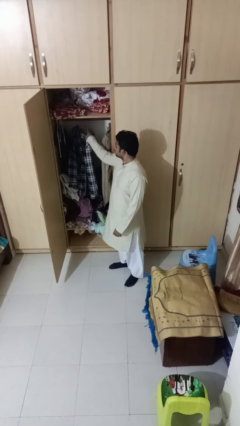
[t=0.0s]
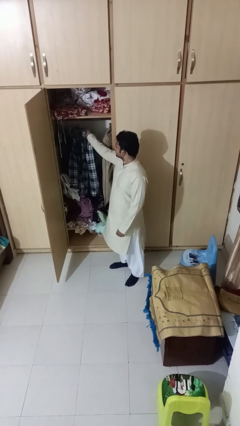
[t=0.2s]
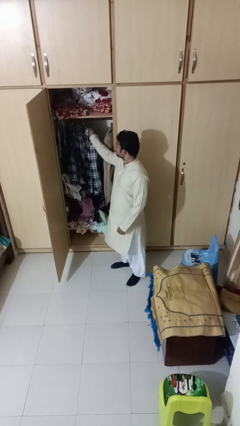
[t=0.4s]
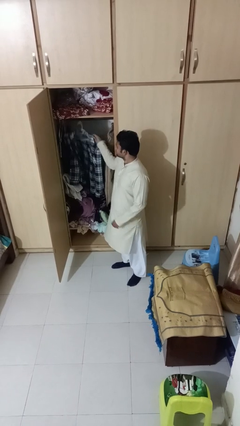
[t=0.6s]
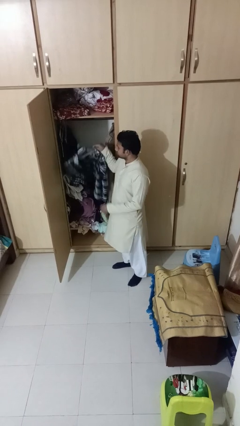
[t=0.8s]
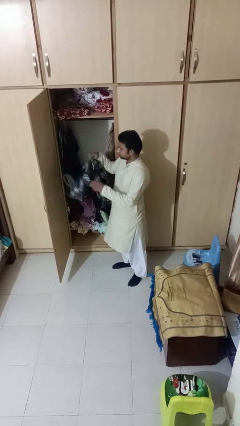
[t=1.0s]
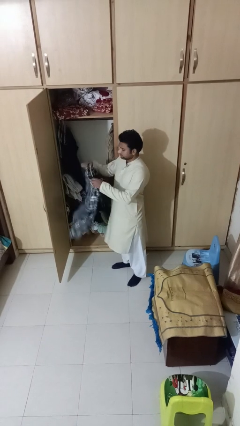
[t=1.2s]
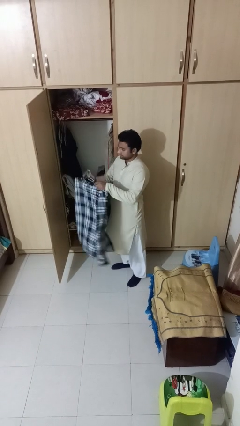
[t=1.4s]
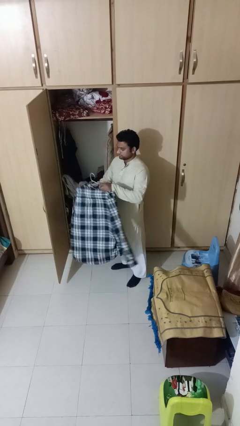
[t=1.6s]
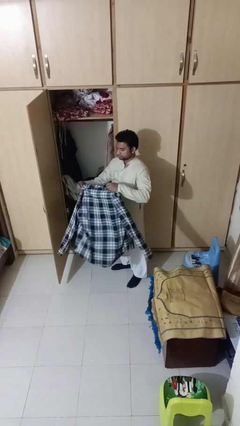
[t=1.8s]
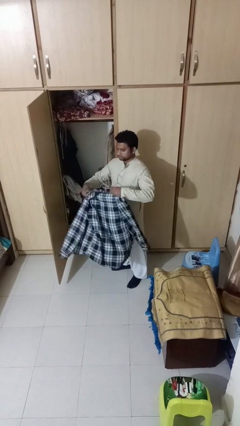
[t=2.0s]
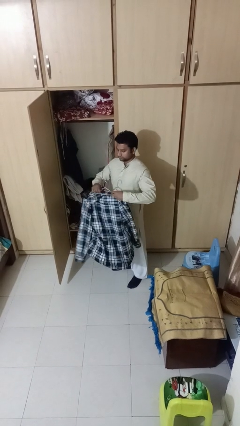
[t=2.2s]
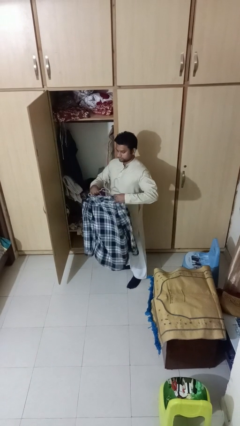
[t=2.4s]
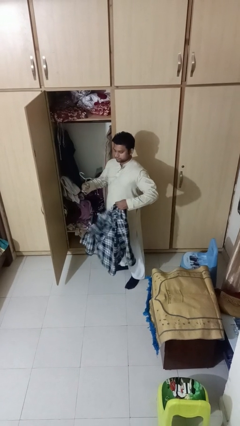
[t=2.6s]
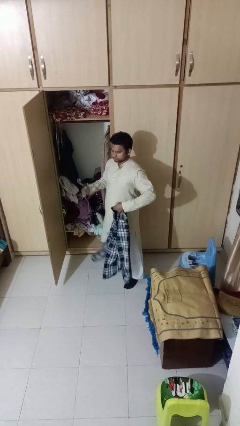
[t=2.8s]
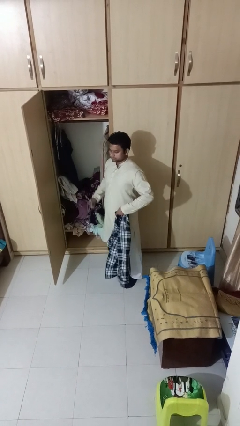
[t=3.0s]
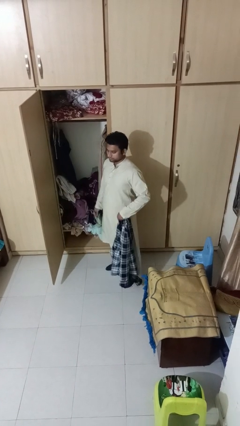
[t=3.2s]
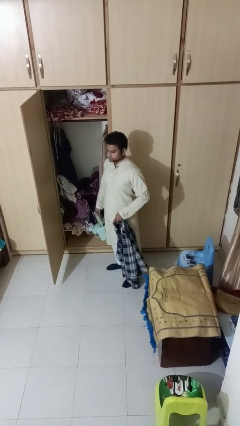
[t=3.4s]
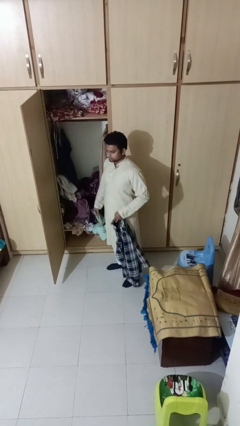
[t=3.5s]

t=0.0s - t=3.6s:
person takes clothes from closet

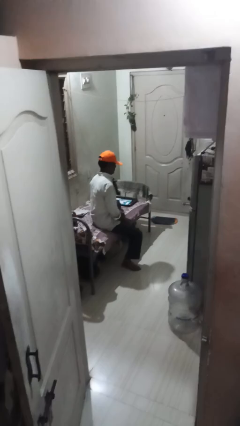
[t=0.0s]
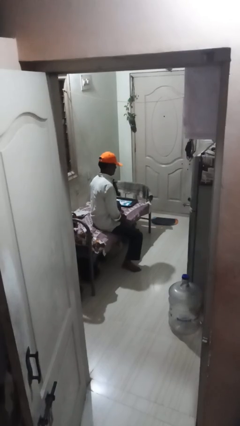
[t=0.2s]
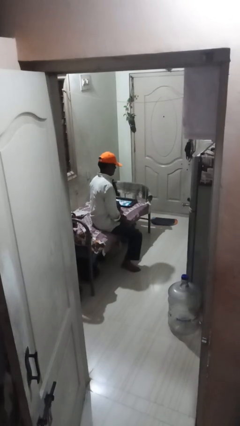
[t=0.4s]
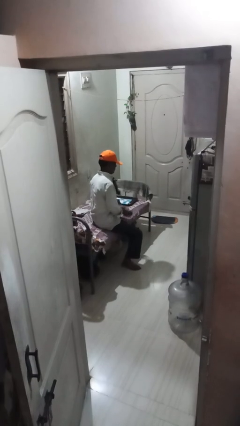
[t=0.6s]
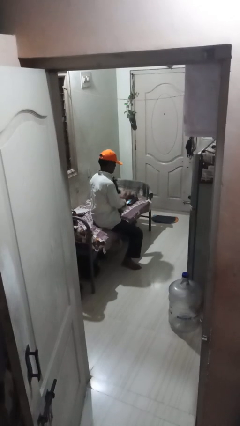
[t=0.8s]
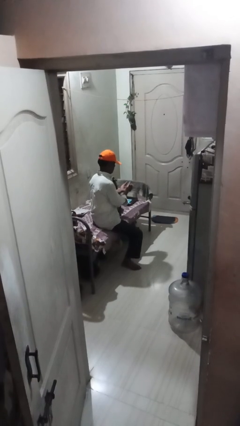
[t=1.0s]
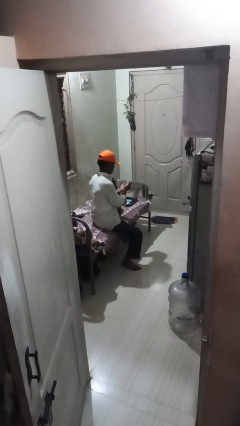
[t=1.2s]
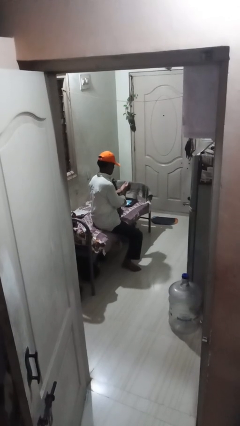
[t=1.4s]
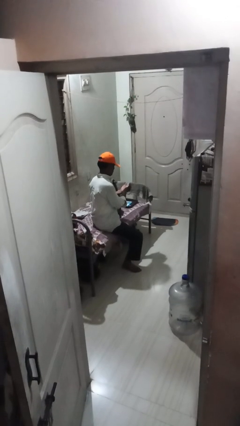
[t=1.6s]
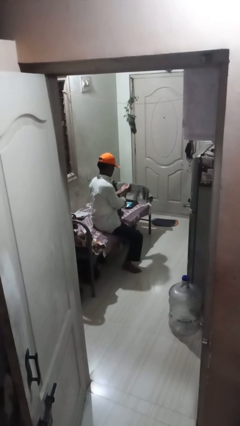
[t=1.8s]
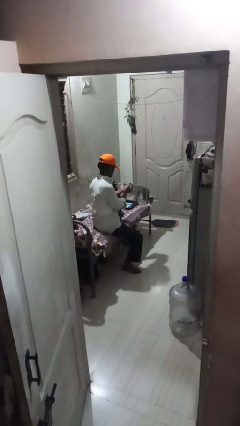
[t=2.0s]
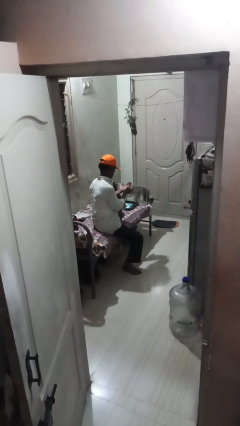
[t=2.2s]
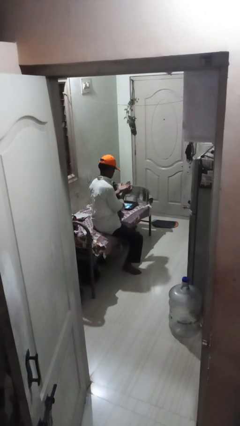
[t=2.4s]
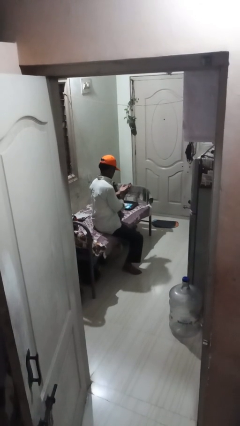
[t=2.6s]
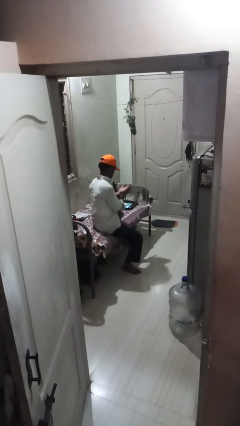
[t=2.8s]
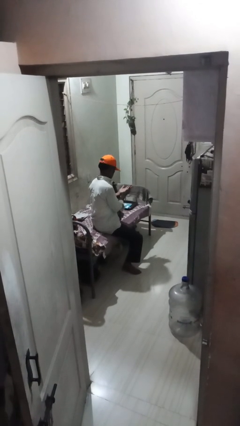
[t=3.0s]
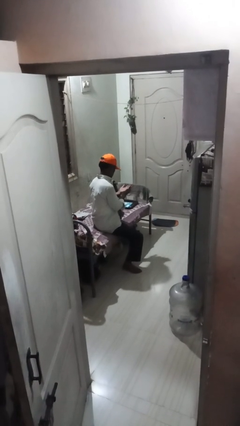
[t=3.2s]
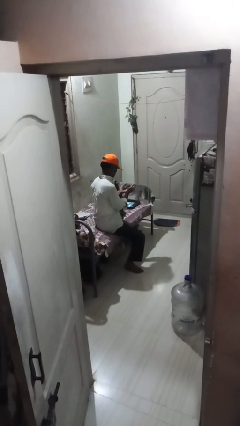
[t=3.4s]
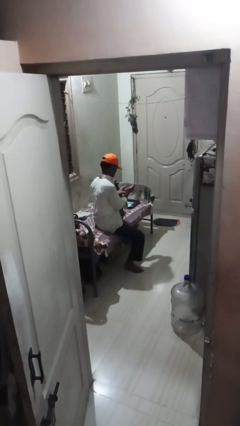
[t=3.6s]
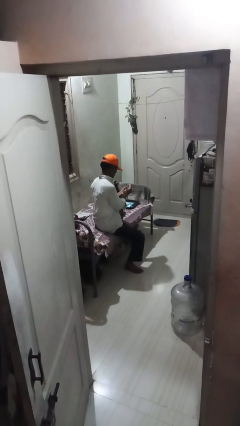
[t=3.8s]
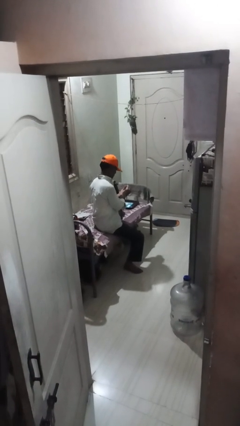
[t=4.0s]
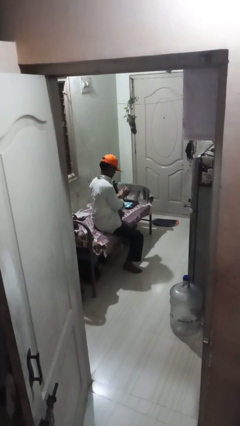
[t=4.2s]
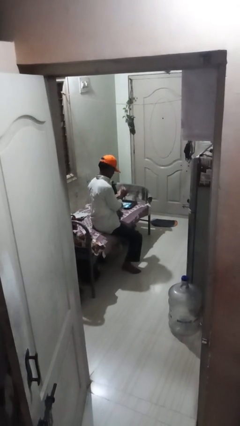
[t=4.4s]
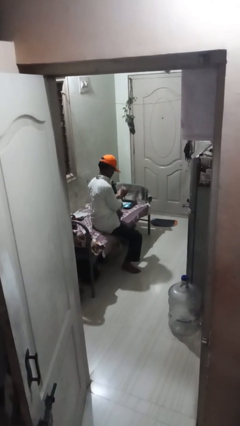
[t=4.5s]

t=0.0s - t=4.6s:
person looks at hands in lap

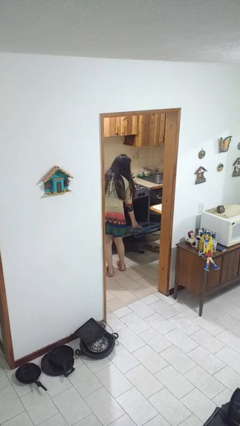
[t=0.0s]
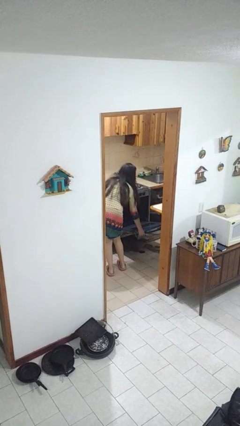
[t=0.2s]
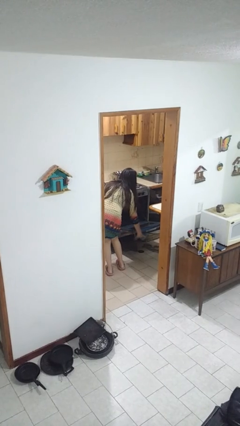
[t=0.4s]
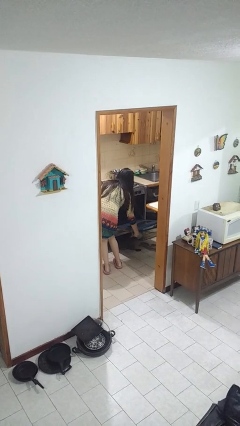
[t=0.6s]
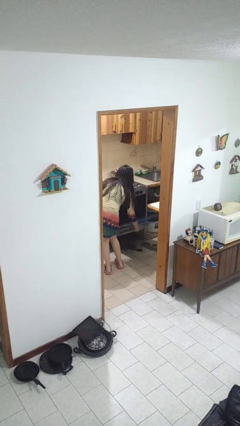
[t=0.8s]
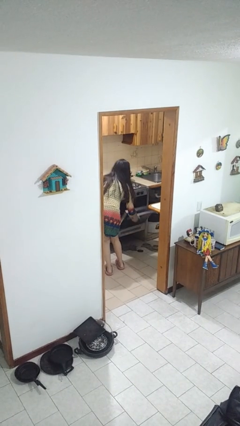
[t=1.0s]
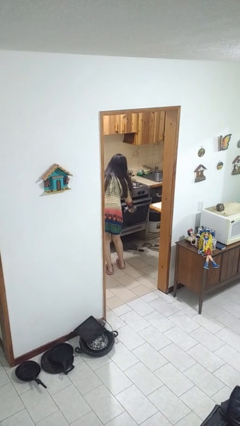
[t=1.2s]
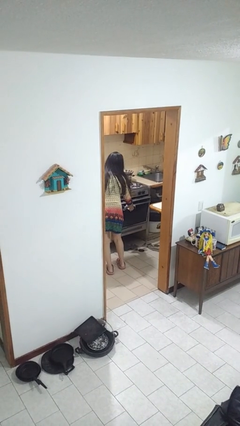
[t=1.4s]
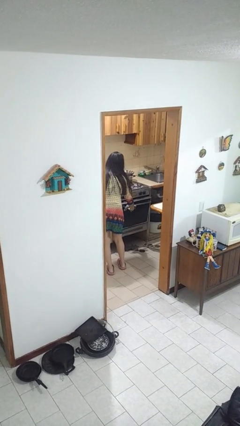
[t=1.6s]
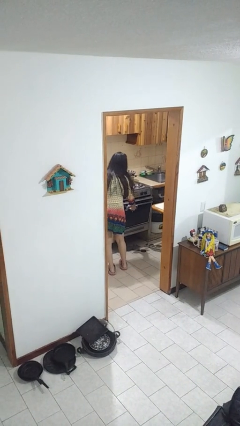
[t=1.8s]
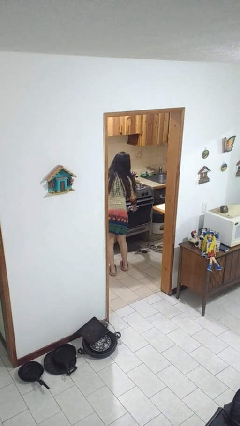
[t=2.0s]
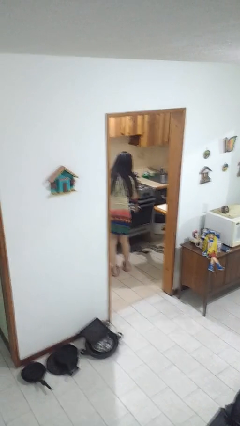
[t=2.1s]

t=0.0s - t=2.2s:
person closes oven door

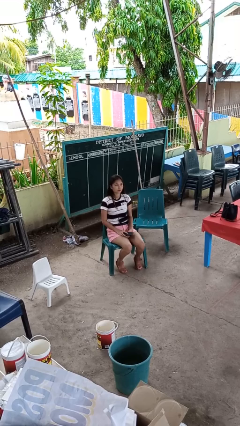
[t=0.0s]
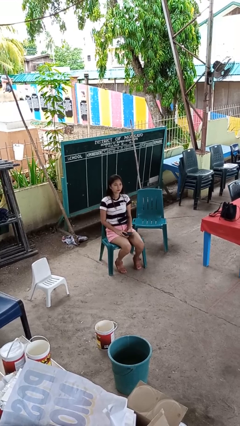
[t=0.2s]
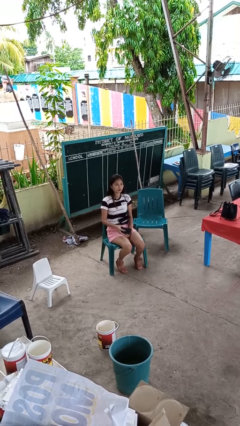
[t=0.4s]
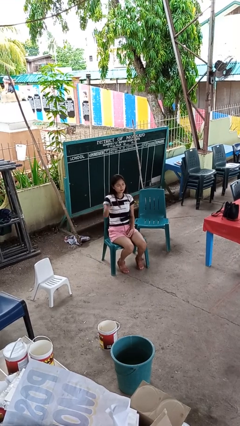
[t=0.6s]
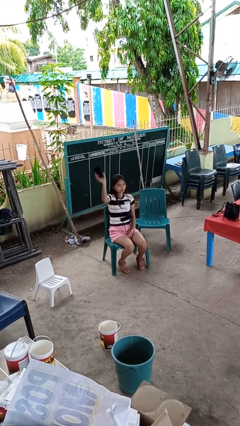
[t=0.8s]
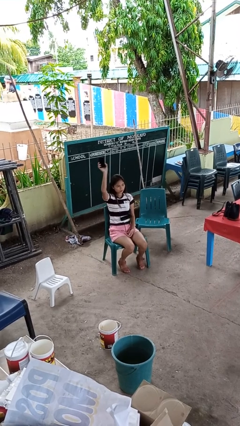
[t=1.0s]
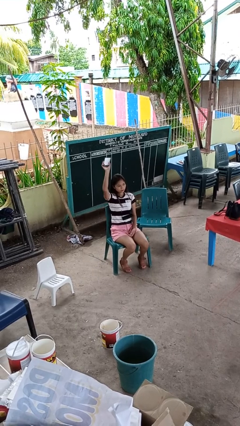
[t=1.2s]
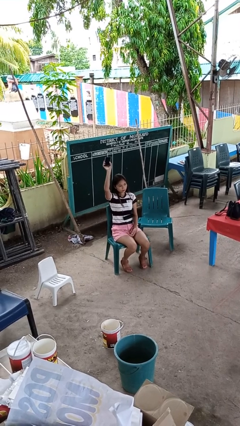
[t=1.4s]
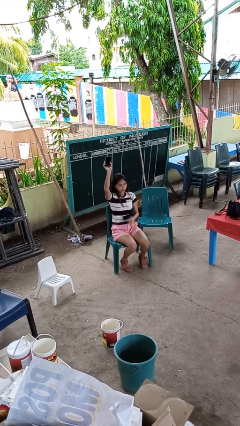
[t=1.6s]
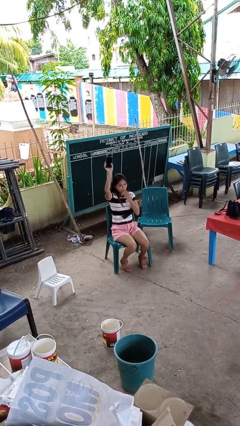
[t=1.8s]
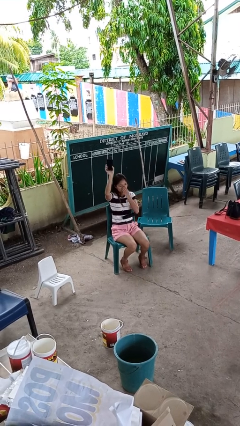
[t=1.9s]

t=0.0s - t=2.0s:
person holds object above head

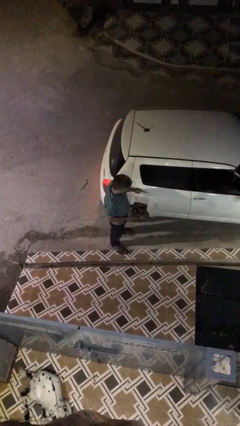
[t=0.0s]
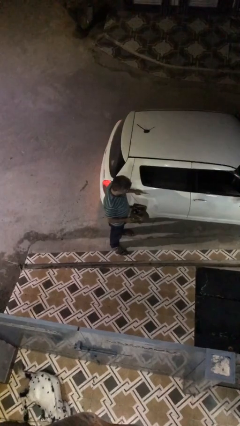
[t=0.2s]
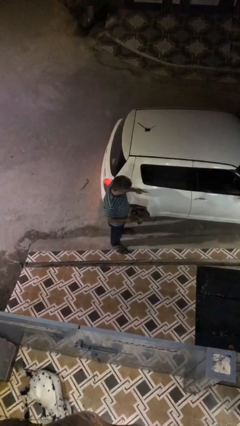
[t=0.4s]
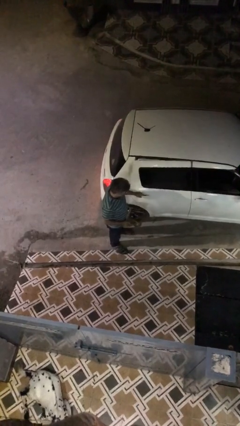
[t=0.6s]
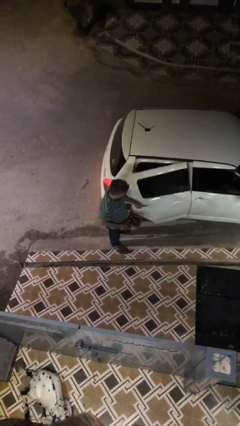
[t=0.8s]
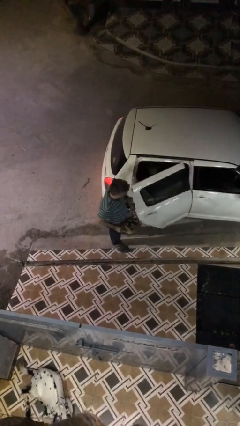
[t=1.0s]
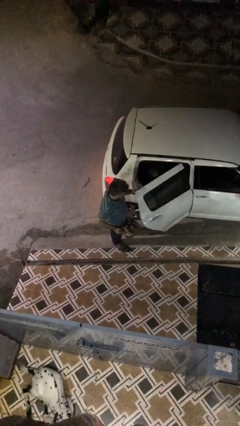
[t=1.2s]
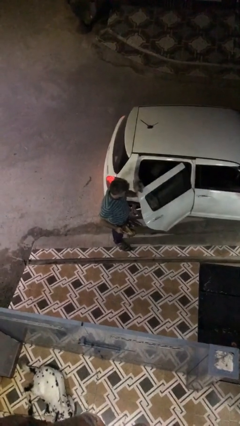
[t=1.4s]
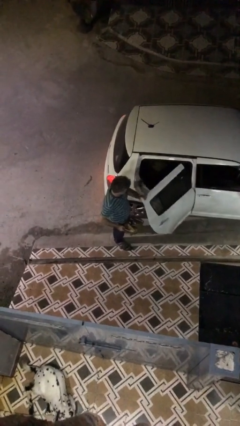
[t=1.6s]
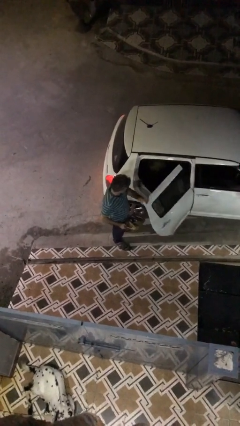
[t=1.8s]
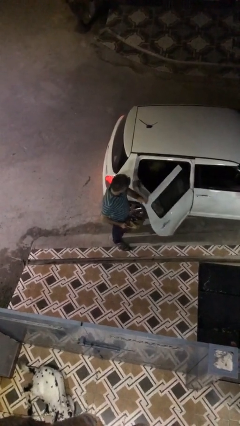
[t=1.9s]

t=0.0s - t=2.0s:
person opens car door

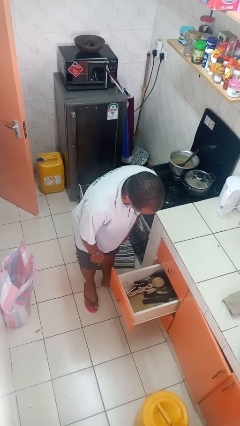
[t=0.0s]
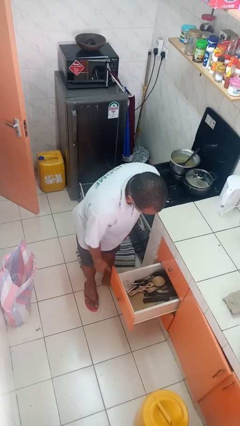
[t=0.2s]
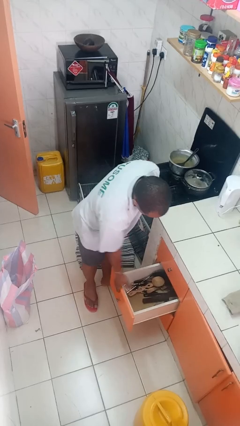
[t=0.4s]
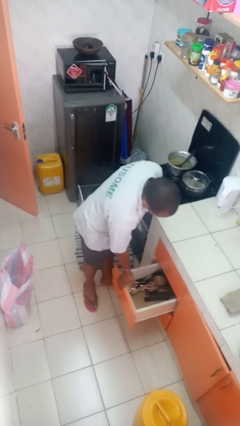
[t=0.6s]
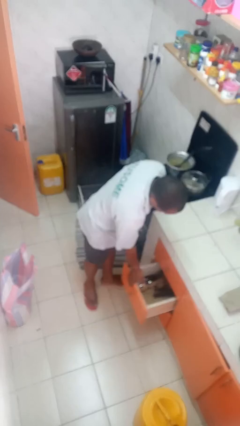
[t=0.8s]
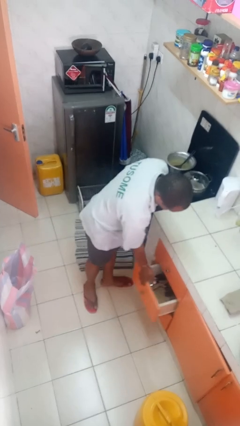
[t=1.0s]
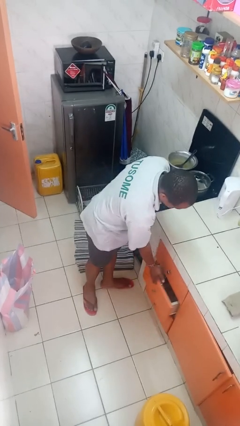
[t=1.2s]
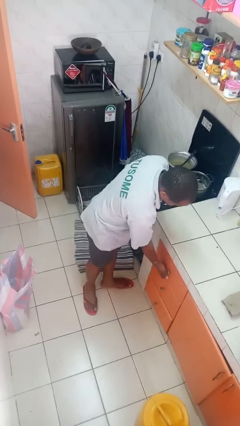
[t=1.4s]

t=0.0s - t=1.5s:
person closes kitchen drawer

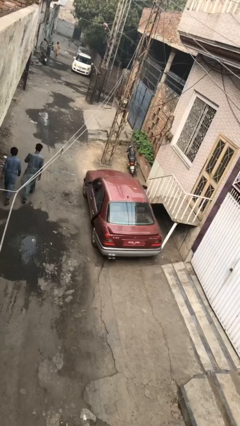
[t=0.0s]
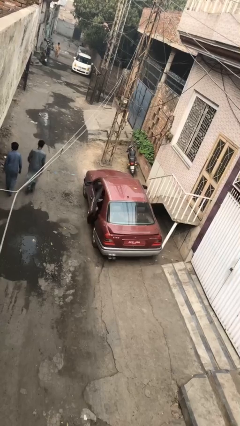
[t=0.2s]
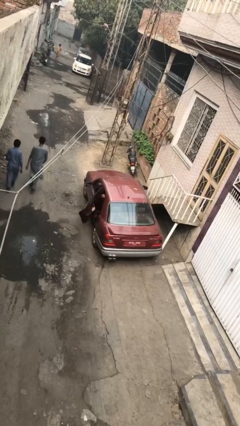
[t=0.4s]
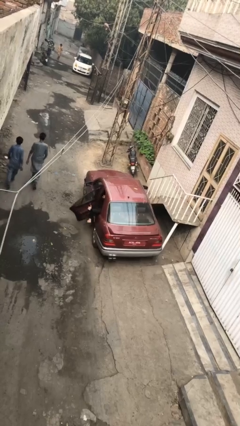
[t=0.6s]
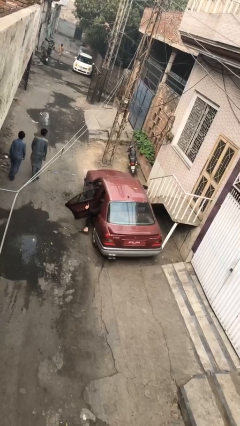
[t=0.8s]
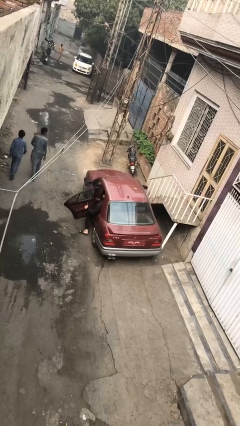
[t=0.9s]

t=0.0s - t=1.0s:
car drops off person
